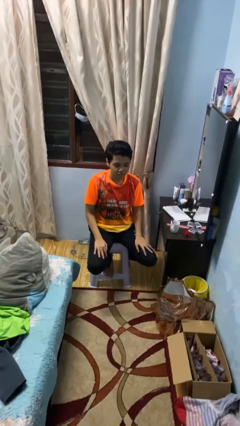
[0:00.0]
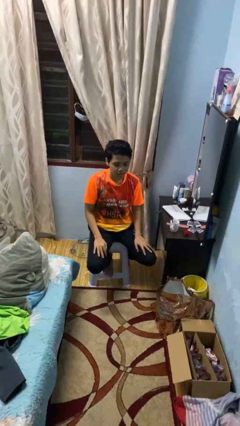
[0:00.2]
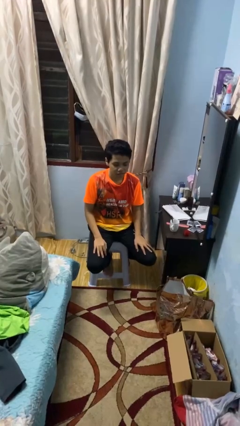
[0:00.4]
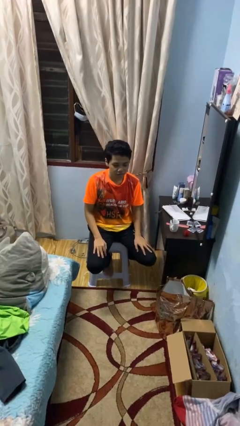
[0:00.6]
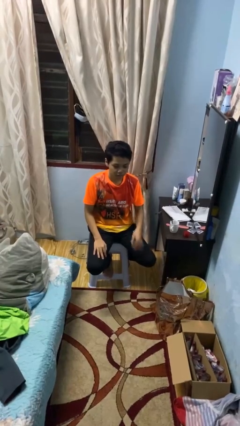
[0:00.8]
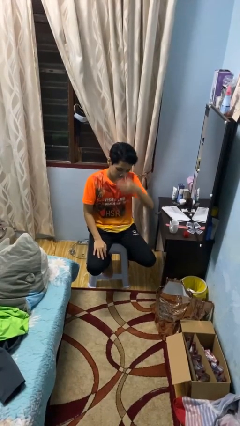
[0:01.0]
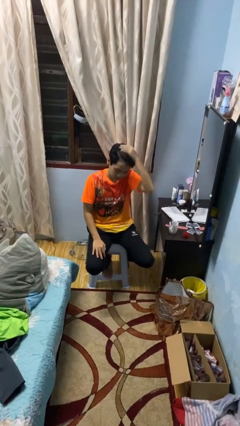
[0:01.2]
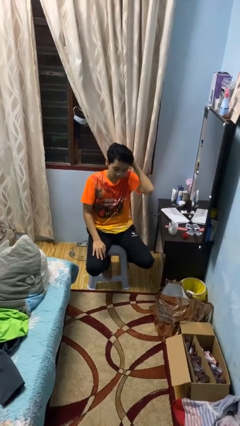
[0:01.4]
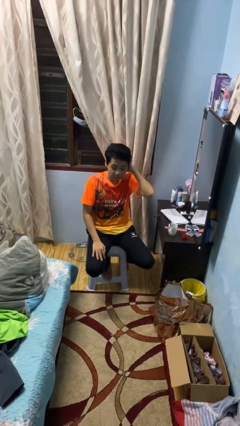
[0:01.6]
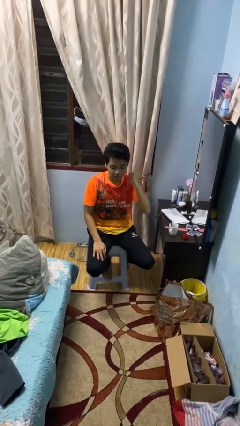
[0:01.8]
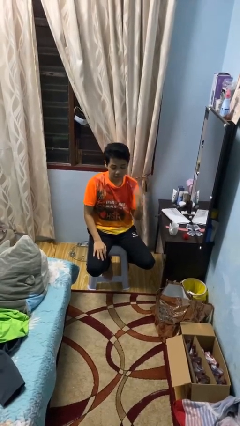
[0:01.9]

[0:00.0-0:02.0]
person strokes hair

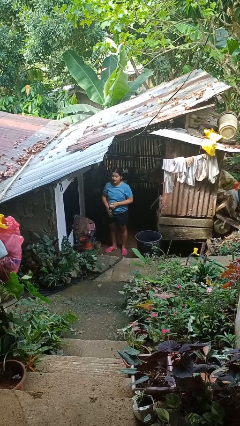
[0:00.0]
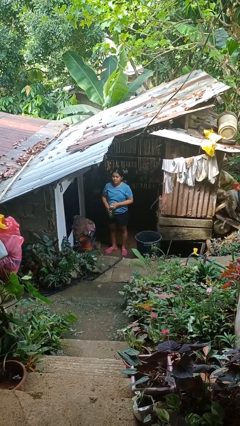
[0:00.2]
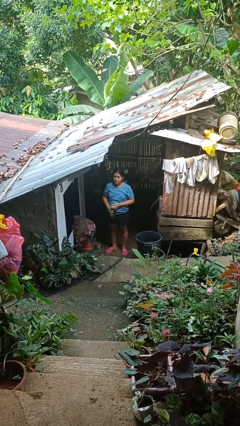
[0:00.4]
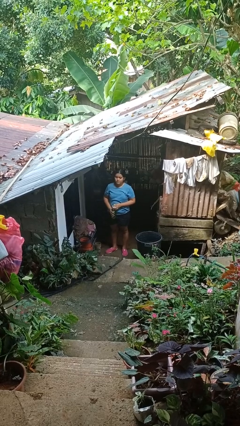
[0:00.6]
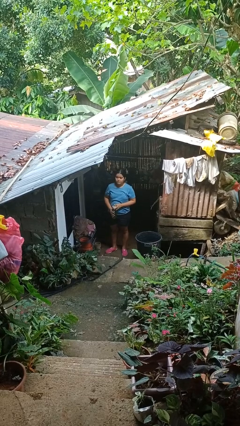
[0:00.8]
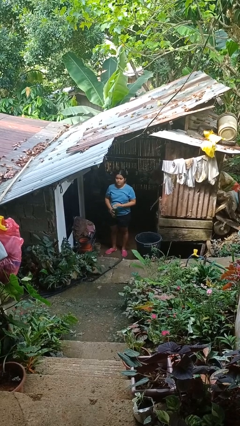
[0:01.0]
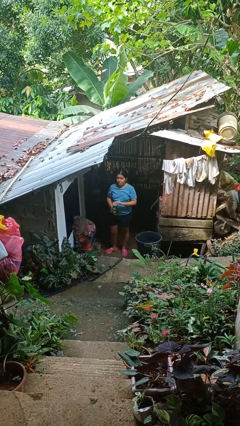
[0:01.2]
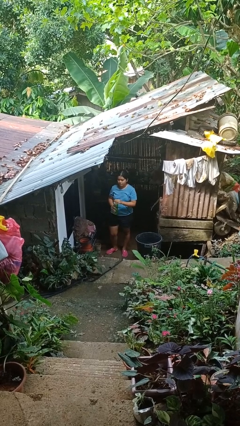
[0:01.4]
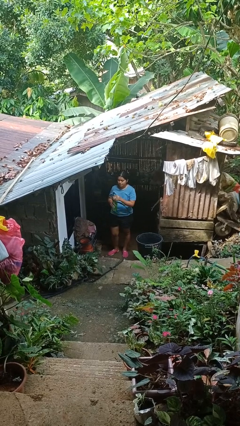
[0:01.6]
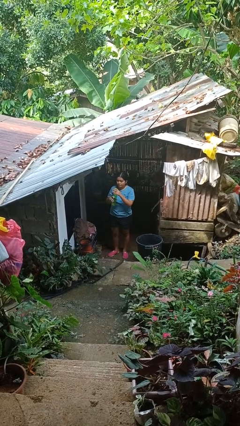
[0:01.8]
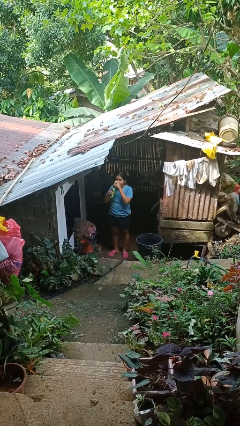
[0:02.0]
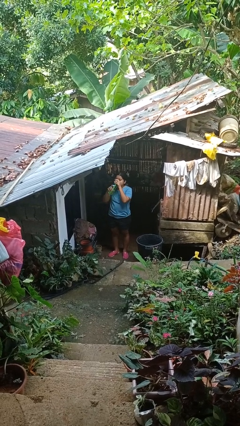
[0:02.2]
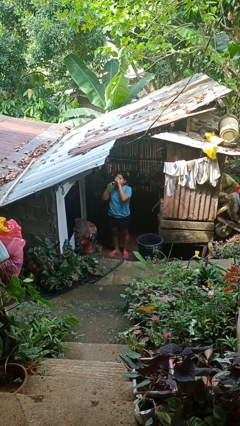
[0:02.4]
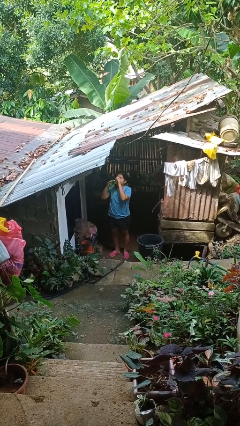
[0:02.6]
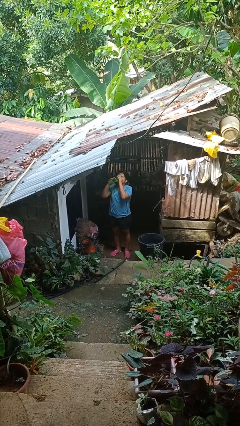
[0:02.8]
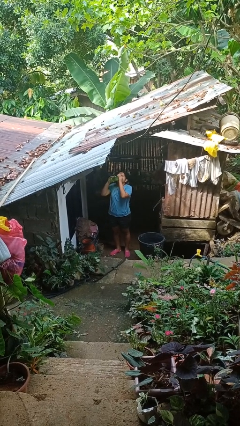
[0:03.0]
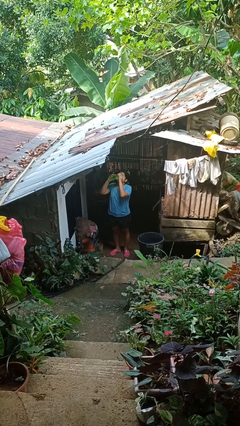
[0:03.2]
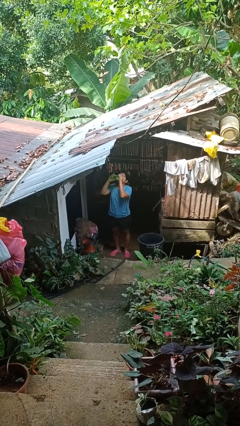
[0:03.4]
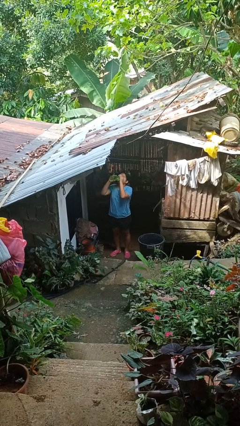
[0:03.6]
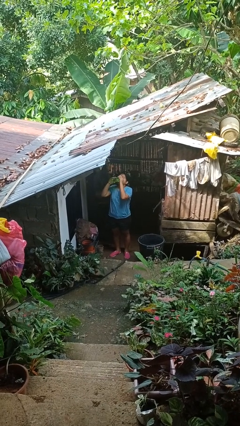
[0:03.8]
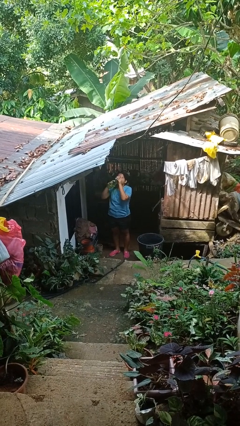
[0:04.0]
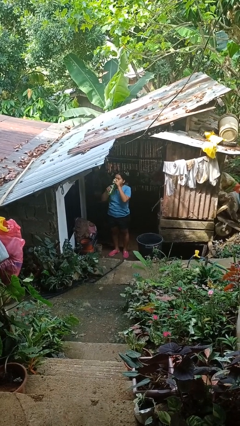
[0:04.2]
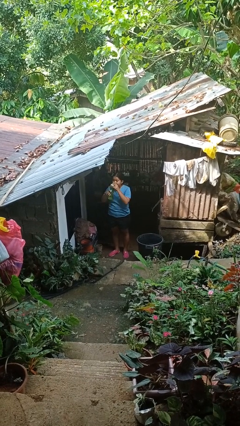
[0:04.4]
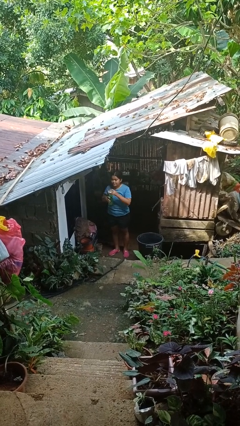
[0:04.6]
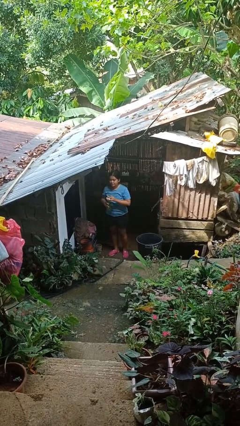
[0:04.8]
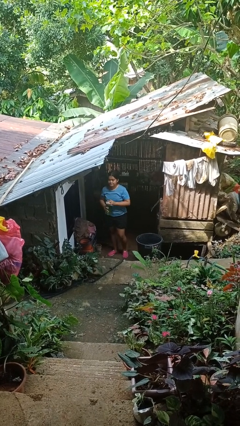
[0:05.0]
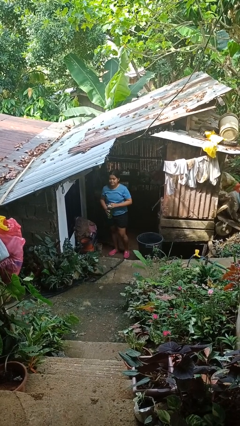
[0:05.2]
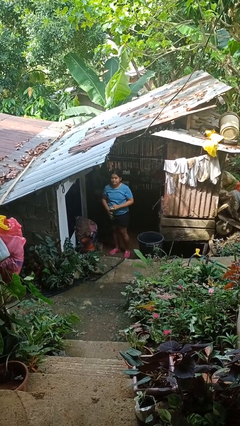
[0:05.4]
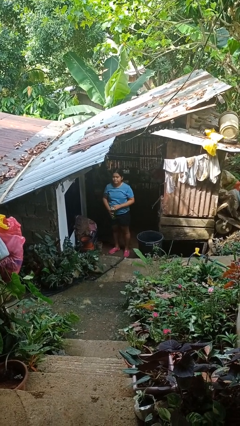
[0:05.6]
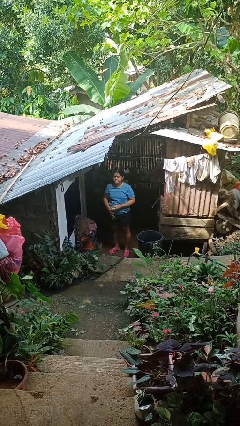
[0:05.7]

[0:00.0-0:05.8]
person drinks from bottle

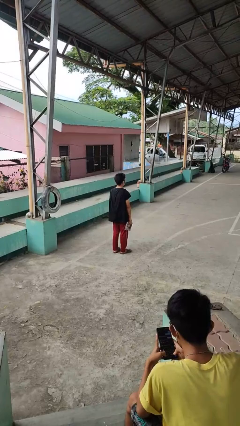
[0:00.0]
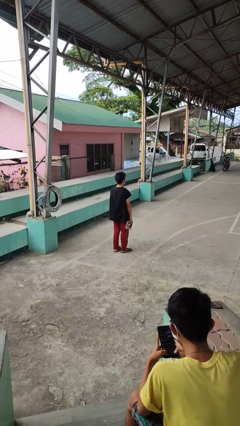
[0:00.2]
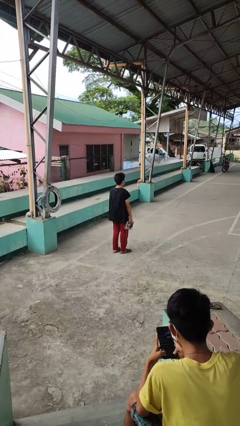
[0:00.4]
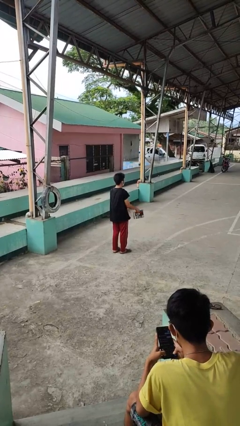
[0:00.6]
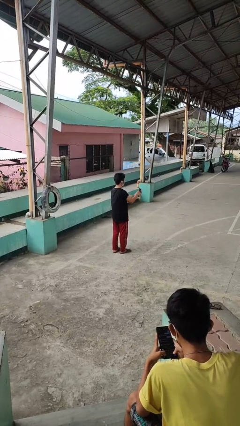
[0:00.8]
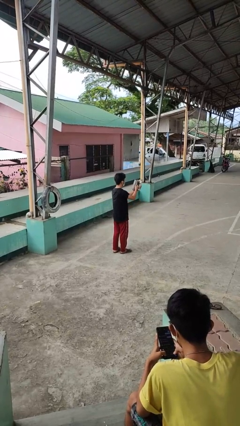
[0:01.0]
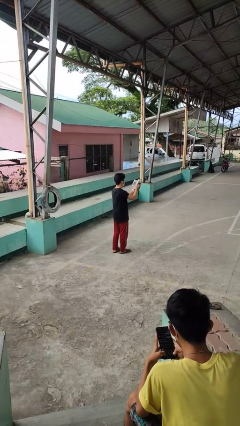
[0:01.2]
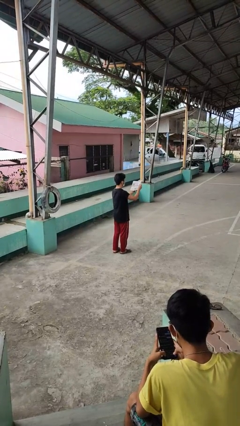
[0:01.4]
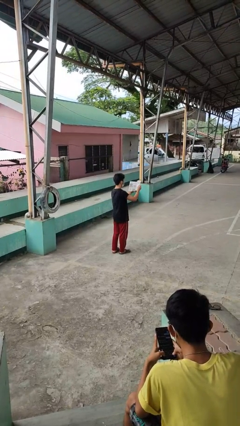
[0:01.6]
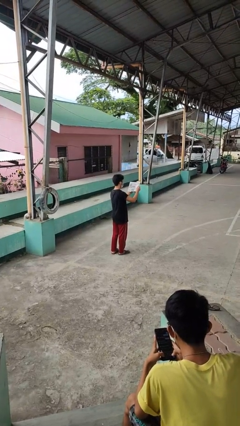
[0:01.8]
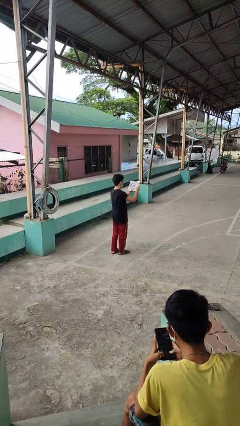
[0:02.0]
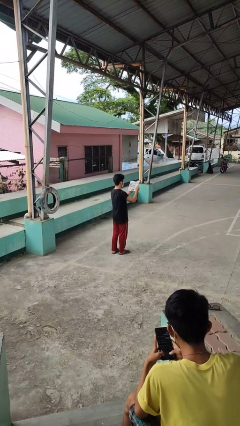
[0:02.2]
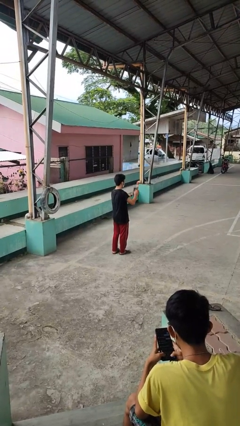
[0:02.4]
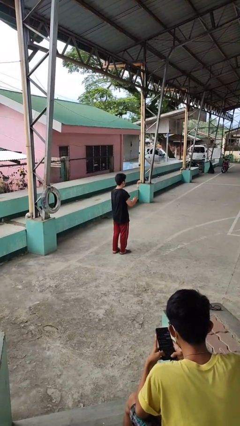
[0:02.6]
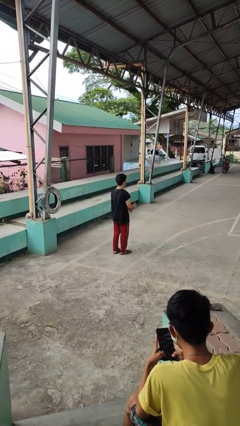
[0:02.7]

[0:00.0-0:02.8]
person reads magazine

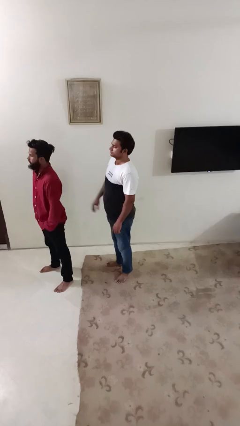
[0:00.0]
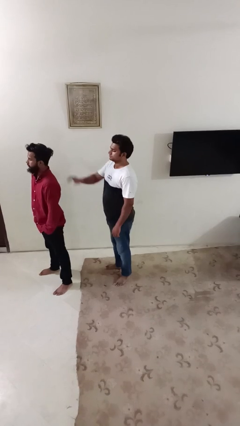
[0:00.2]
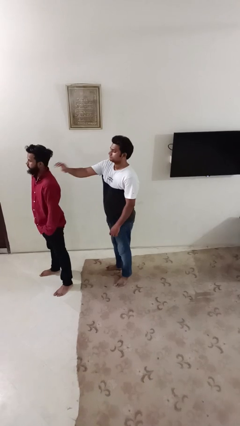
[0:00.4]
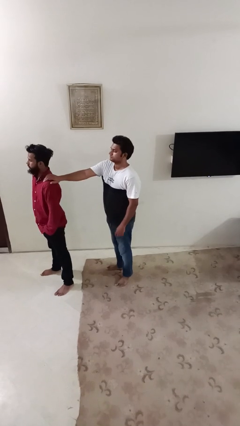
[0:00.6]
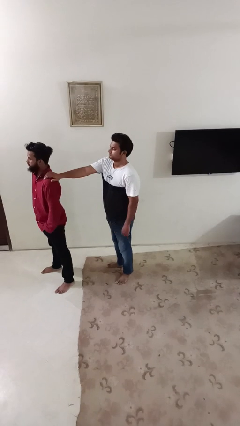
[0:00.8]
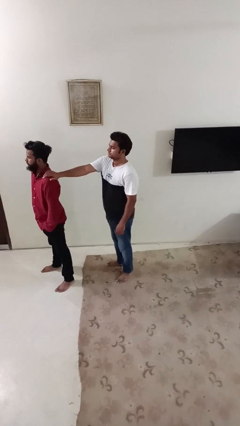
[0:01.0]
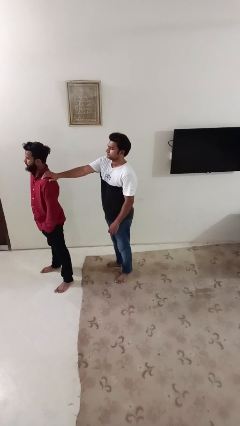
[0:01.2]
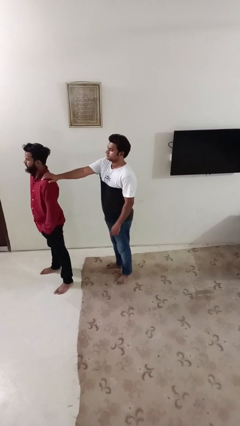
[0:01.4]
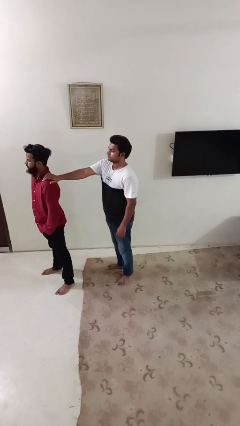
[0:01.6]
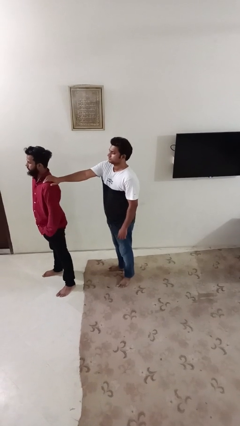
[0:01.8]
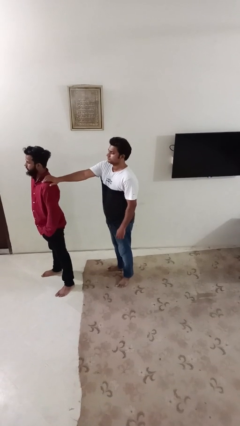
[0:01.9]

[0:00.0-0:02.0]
person grabs person by shoulder

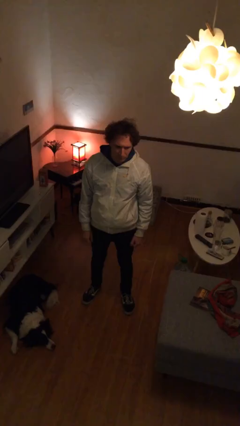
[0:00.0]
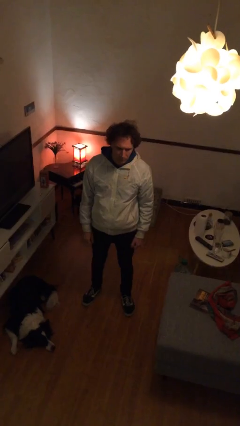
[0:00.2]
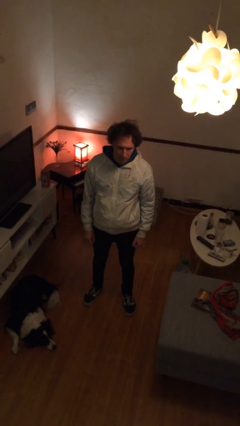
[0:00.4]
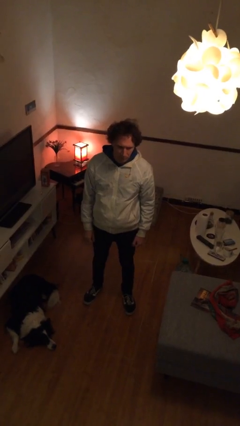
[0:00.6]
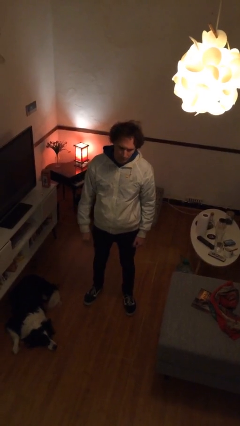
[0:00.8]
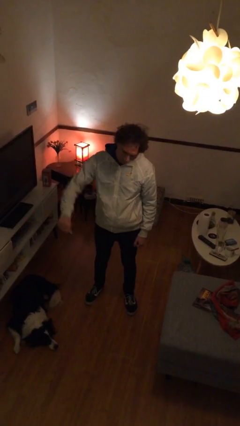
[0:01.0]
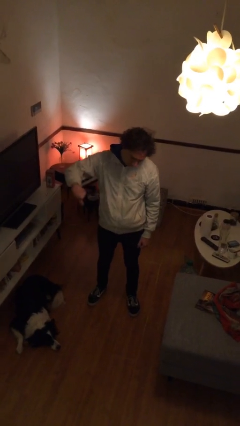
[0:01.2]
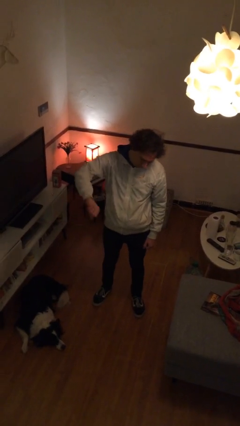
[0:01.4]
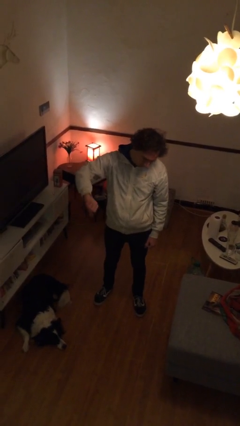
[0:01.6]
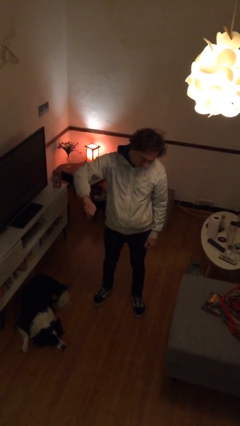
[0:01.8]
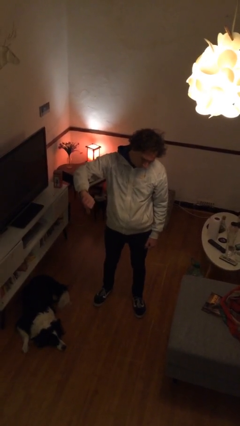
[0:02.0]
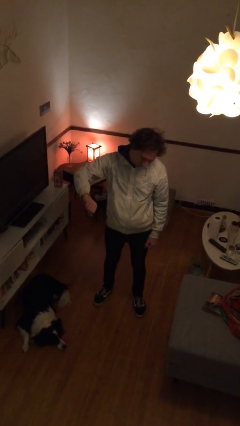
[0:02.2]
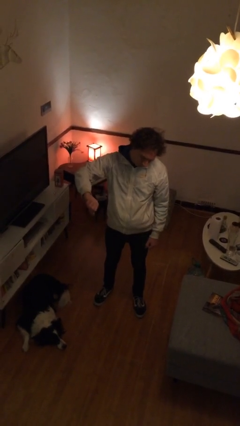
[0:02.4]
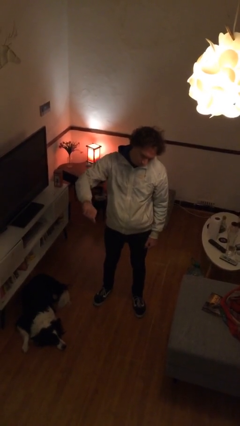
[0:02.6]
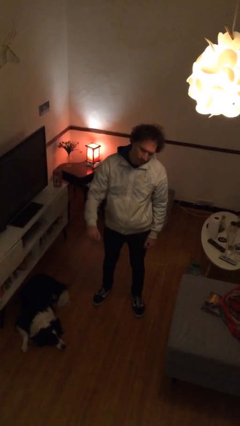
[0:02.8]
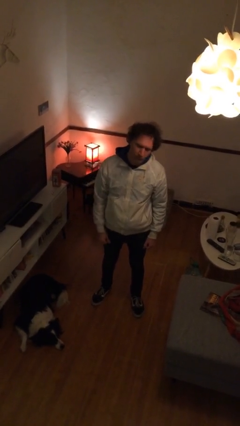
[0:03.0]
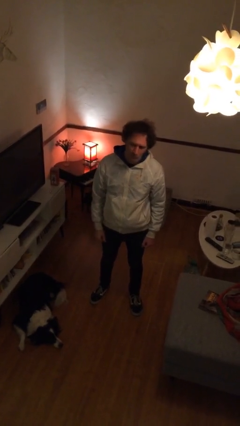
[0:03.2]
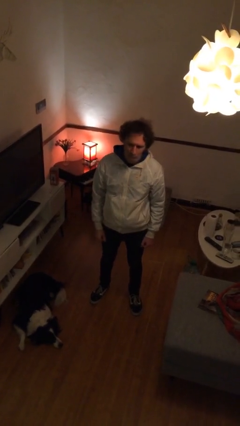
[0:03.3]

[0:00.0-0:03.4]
person gestures thumbs down

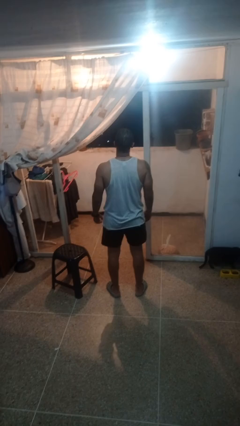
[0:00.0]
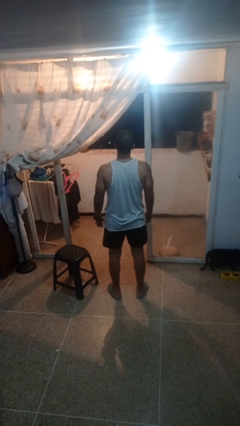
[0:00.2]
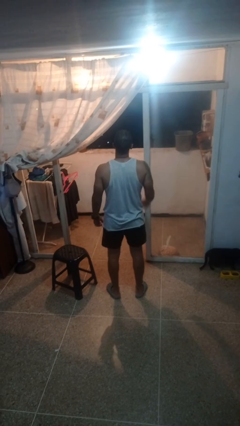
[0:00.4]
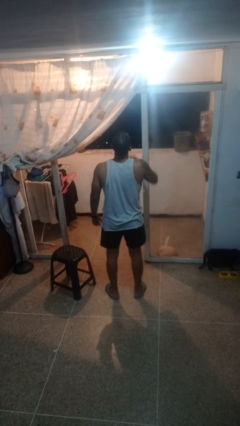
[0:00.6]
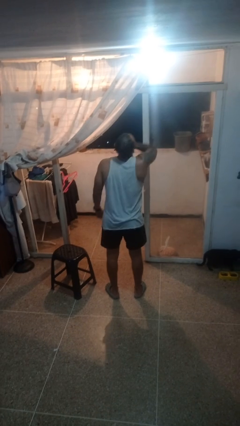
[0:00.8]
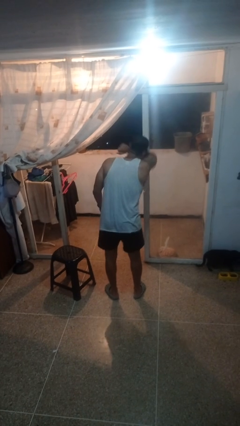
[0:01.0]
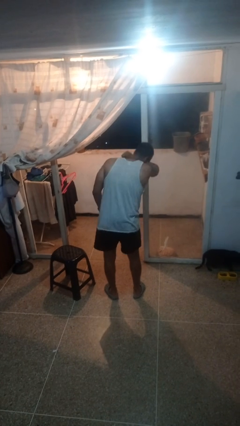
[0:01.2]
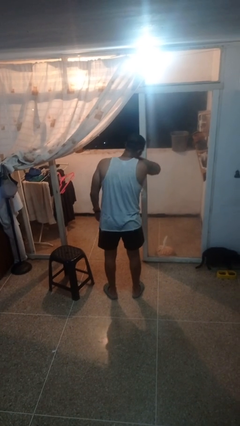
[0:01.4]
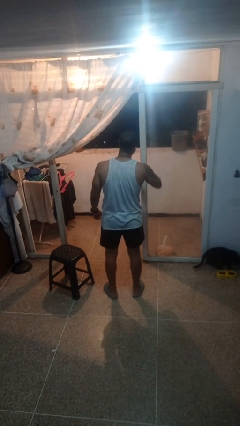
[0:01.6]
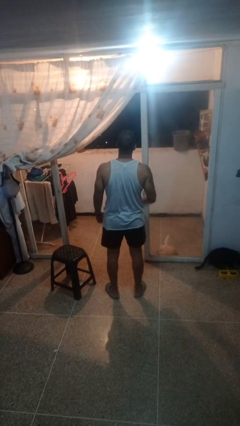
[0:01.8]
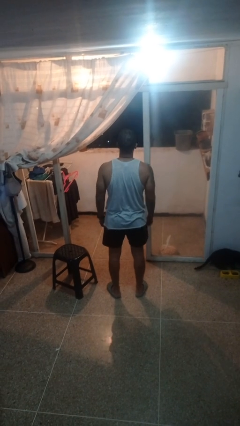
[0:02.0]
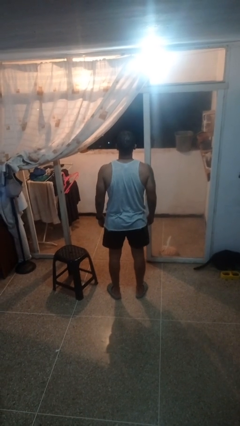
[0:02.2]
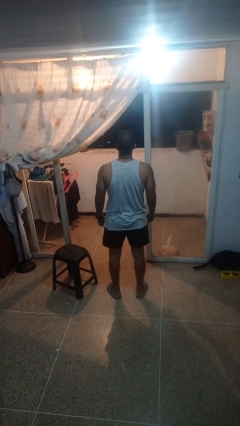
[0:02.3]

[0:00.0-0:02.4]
person sneezes into arm
